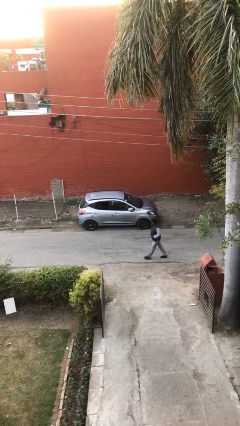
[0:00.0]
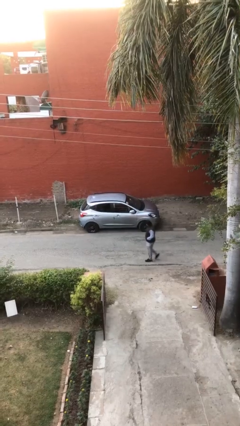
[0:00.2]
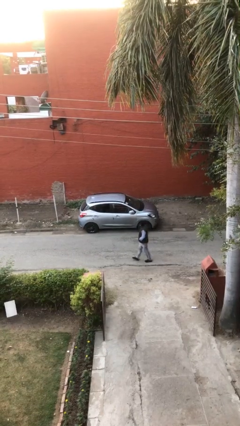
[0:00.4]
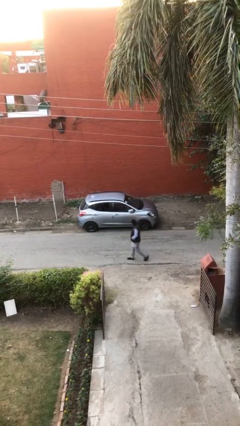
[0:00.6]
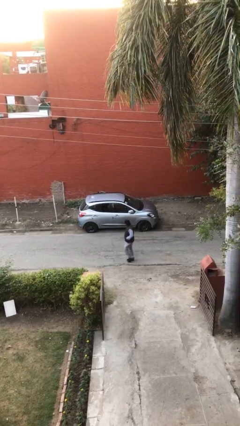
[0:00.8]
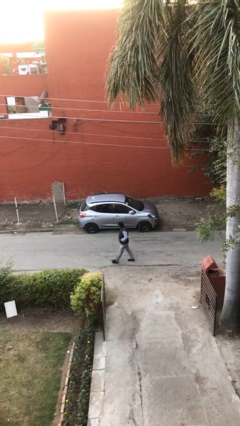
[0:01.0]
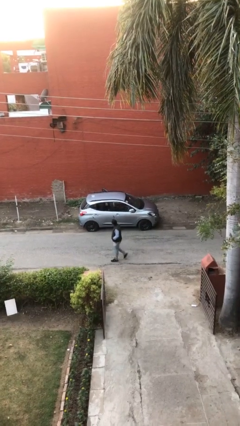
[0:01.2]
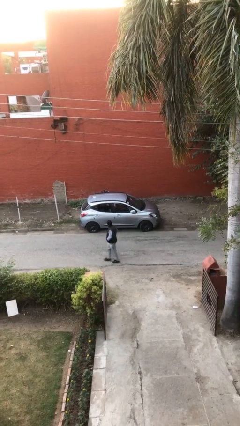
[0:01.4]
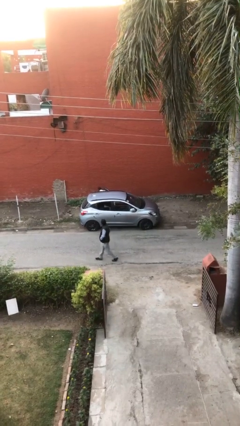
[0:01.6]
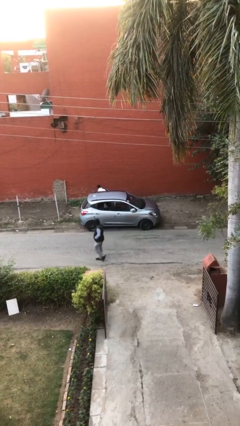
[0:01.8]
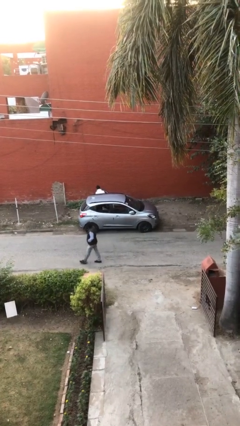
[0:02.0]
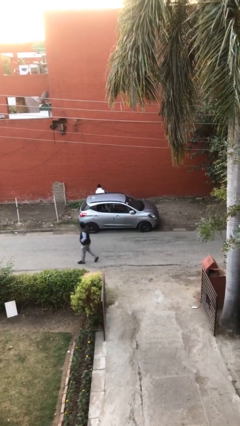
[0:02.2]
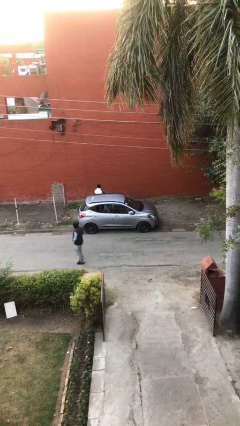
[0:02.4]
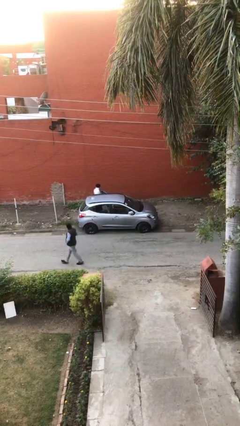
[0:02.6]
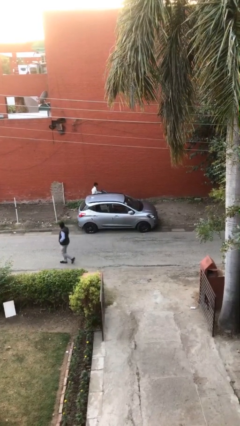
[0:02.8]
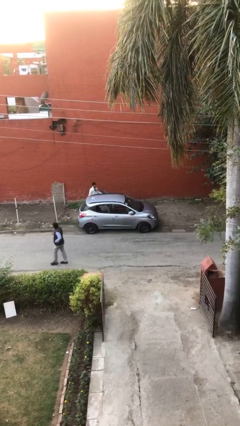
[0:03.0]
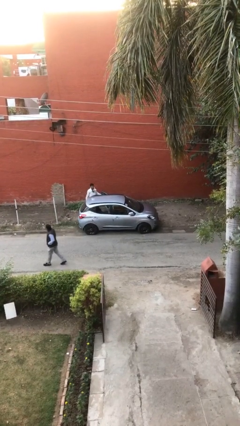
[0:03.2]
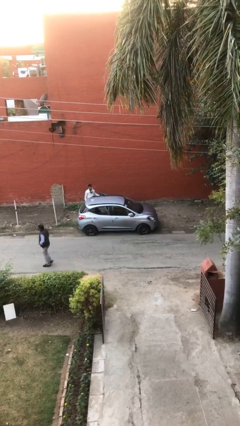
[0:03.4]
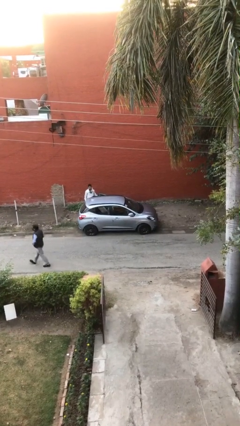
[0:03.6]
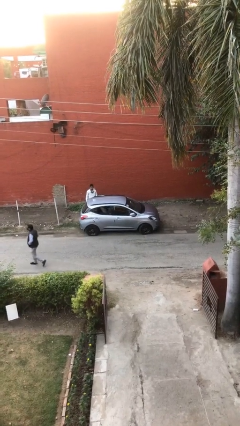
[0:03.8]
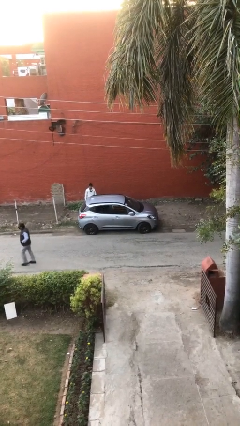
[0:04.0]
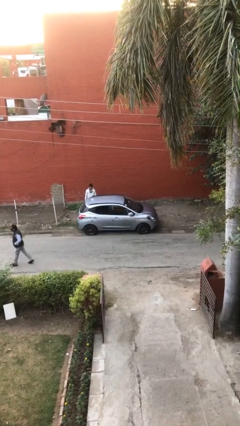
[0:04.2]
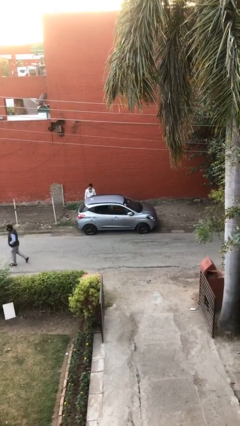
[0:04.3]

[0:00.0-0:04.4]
car drops off person

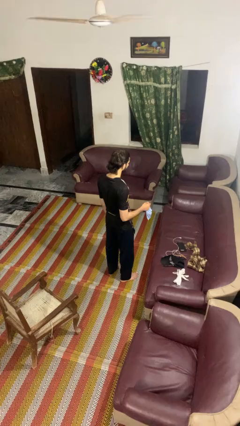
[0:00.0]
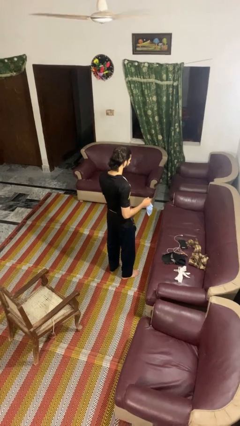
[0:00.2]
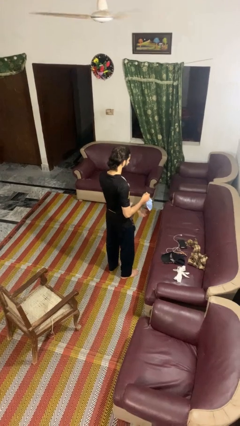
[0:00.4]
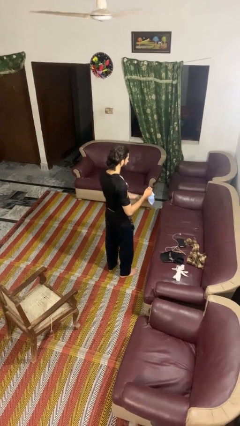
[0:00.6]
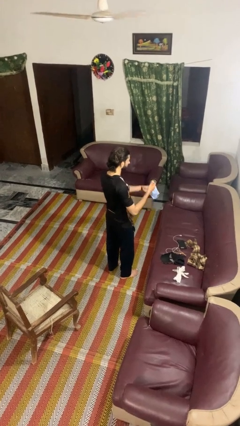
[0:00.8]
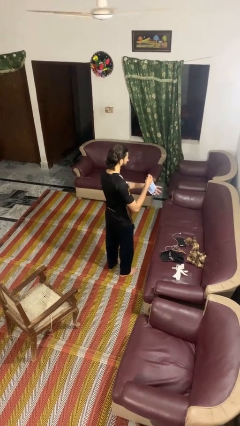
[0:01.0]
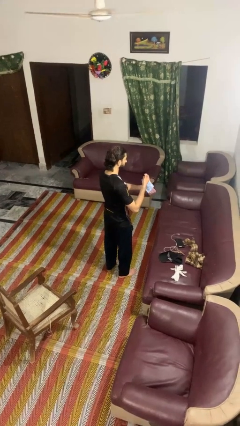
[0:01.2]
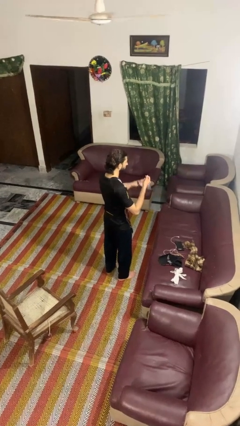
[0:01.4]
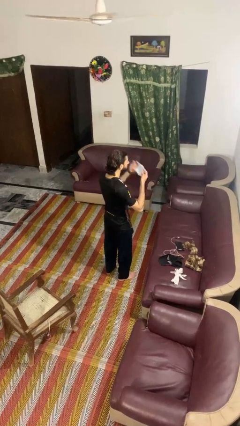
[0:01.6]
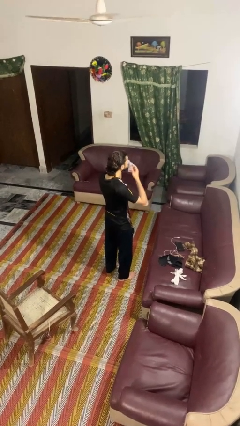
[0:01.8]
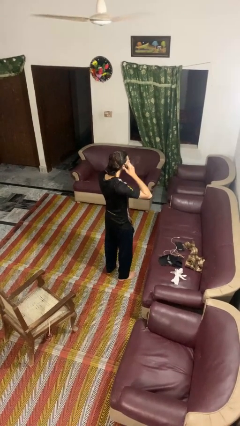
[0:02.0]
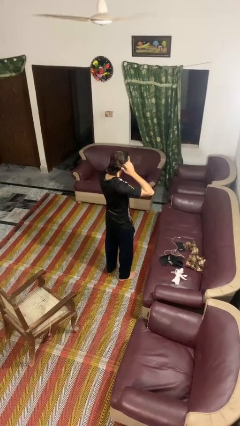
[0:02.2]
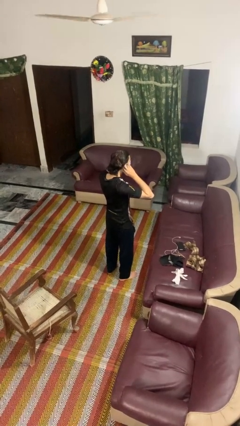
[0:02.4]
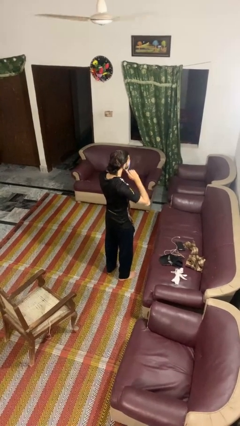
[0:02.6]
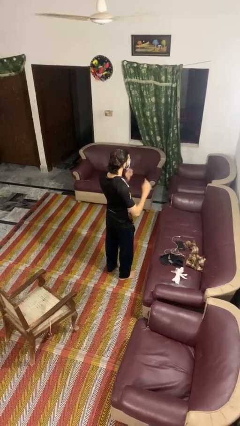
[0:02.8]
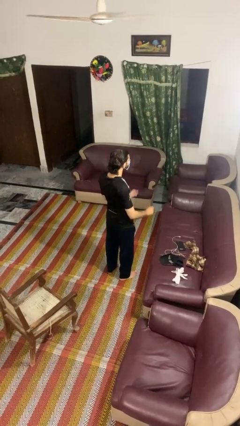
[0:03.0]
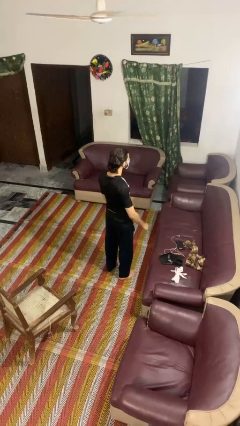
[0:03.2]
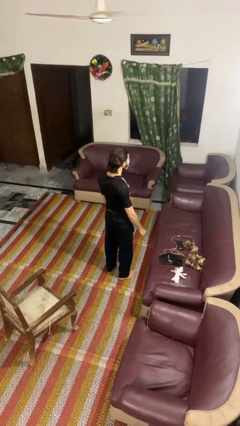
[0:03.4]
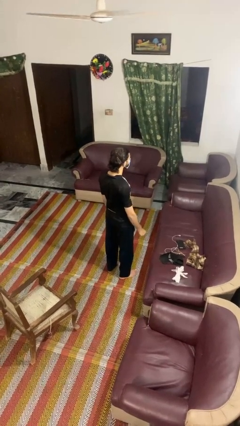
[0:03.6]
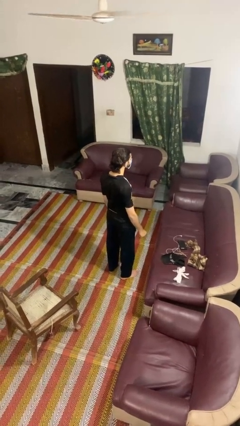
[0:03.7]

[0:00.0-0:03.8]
person puts on facemask

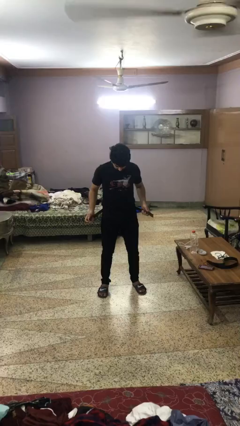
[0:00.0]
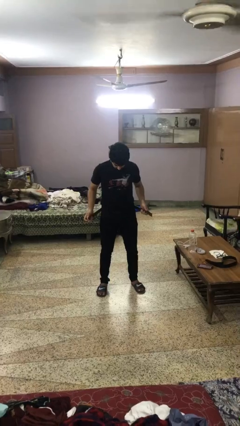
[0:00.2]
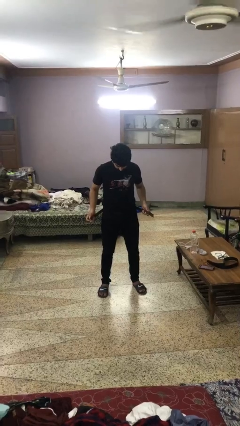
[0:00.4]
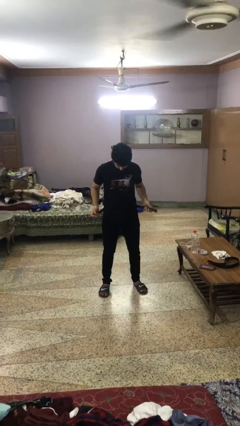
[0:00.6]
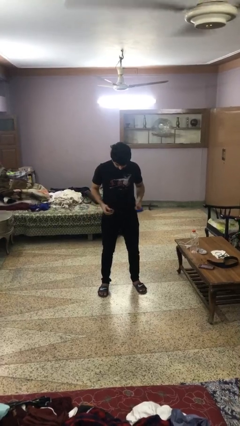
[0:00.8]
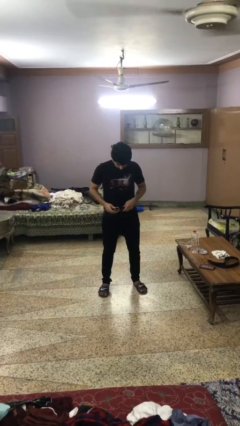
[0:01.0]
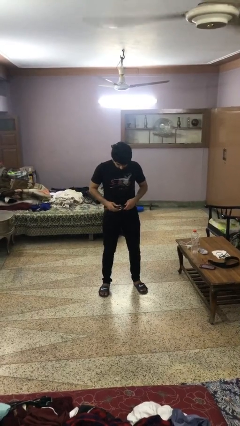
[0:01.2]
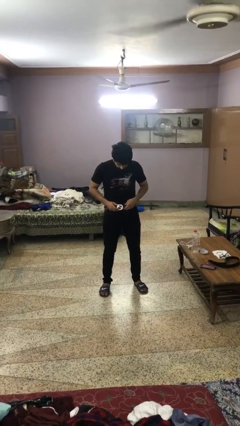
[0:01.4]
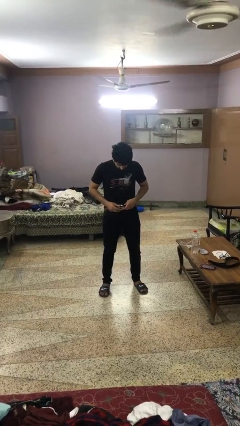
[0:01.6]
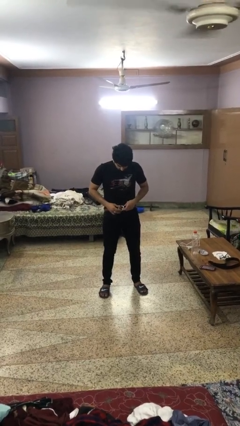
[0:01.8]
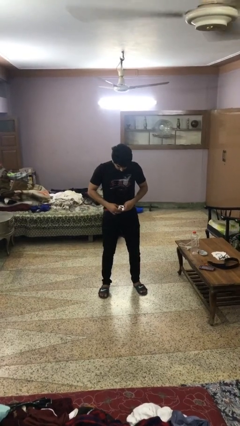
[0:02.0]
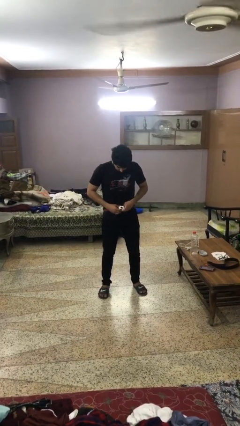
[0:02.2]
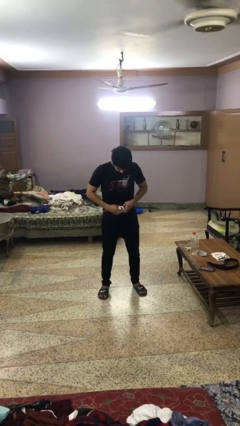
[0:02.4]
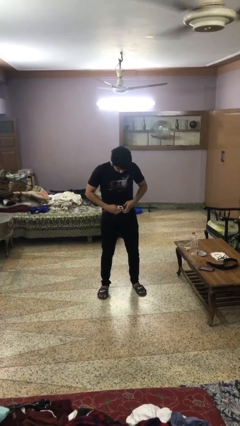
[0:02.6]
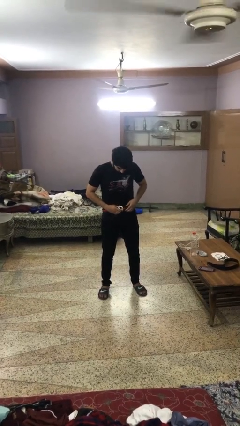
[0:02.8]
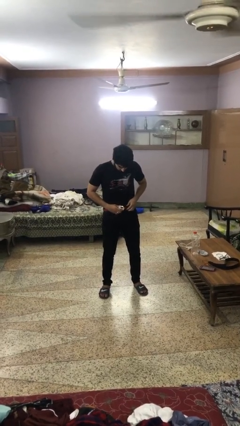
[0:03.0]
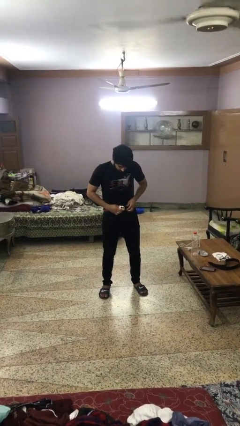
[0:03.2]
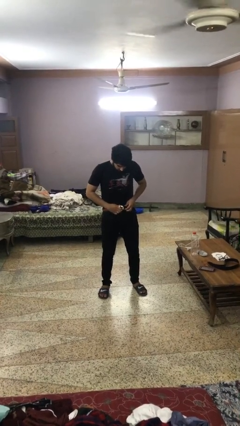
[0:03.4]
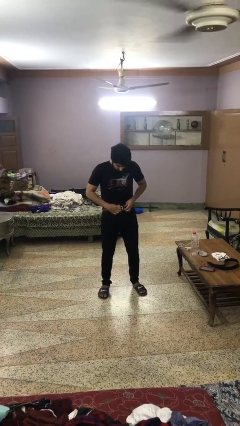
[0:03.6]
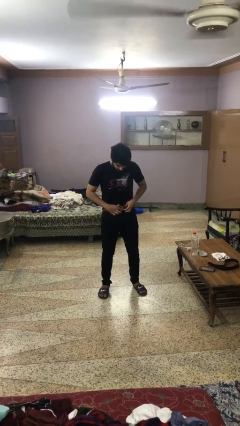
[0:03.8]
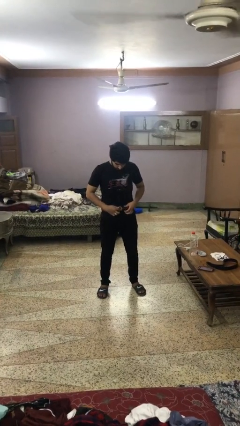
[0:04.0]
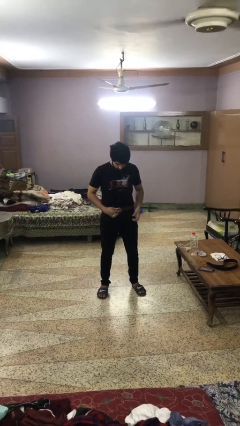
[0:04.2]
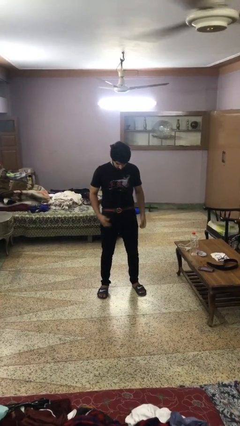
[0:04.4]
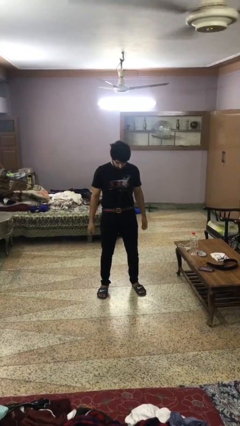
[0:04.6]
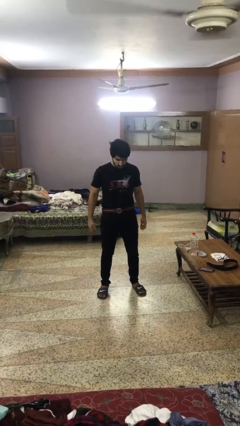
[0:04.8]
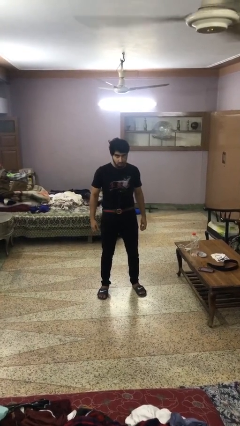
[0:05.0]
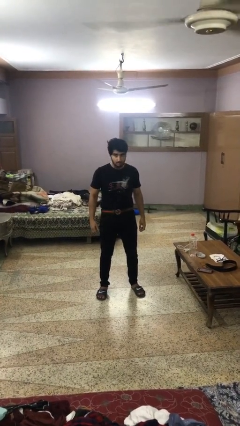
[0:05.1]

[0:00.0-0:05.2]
person puts on belt

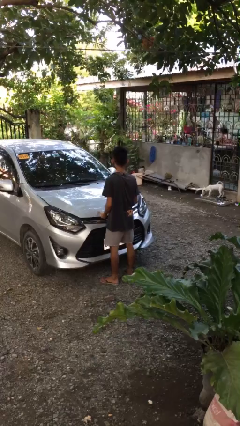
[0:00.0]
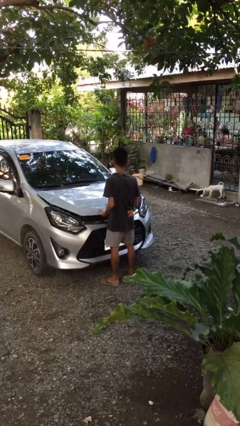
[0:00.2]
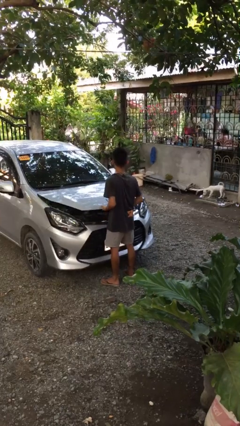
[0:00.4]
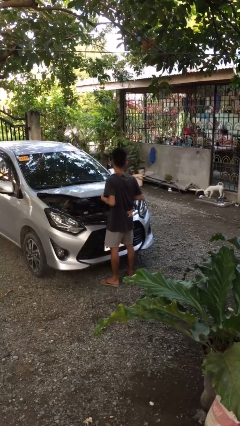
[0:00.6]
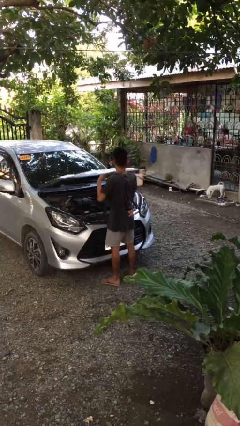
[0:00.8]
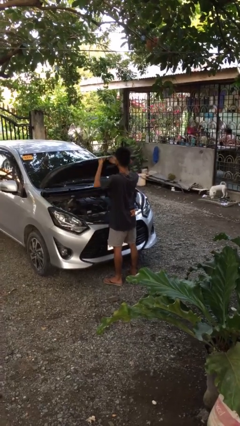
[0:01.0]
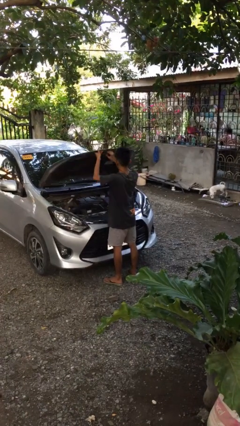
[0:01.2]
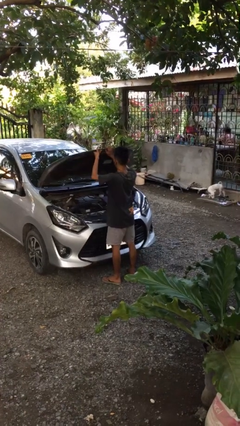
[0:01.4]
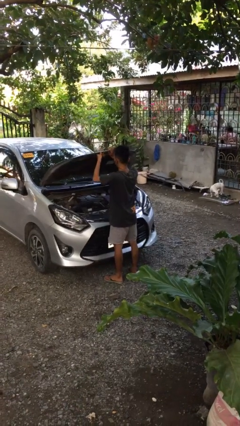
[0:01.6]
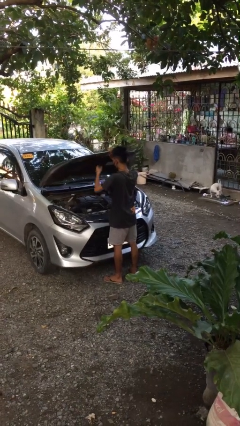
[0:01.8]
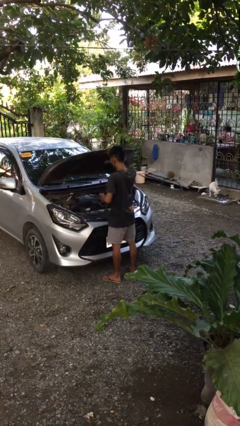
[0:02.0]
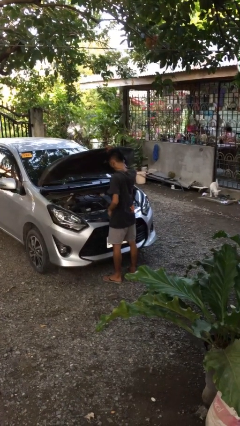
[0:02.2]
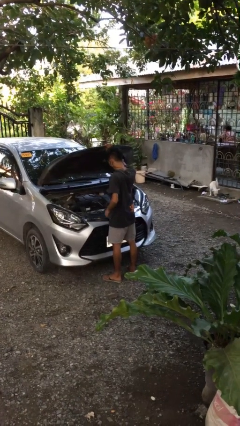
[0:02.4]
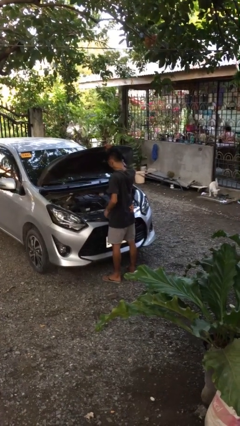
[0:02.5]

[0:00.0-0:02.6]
person opens car hood

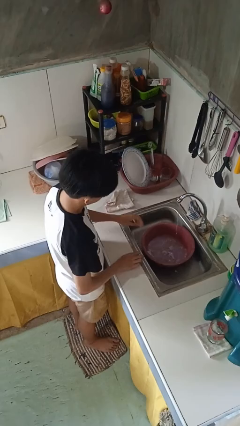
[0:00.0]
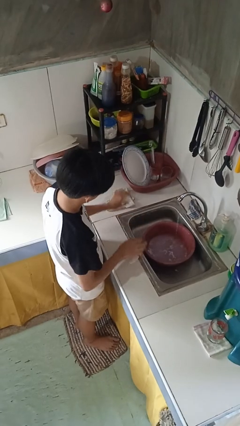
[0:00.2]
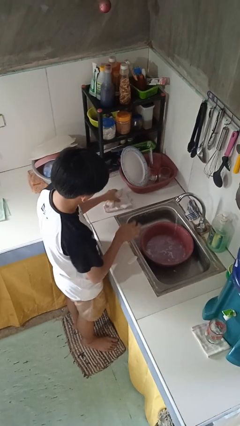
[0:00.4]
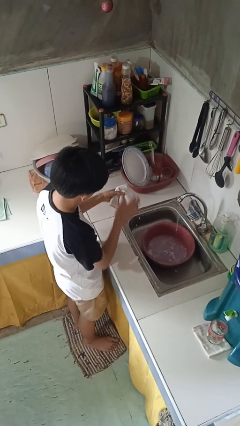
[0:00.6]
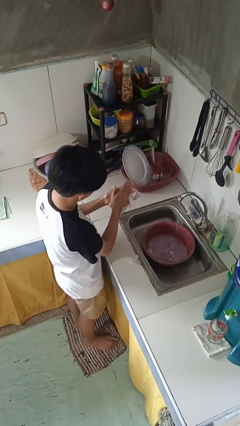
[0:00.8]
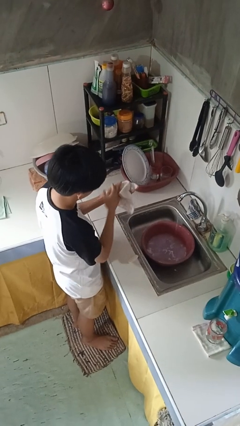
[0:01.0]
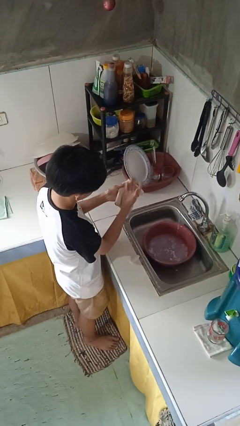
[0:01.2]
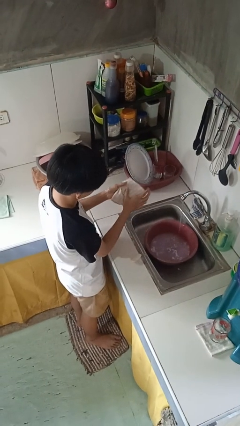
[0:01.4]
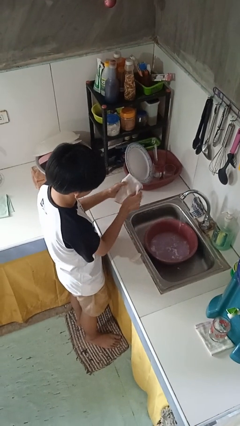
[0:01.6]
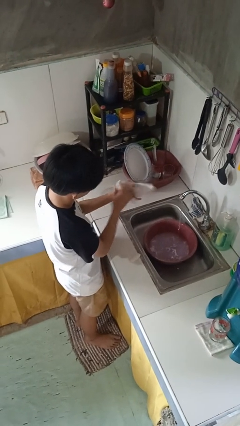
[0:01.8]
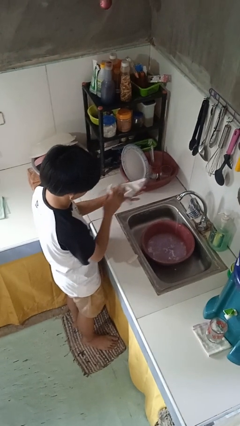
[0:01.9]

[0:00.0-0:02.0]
person dries hands with towel
